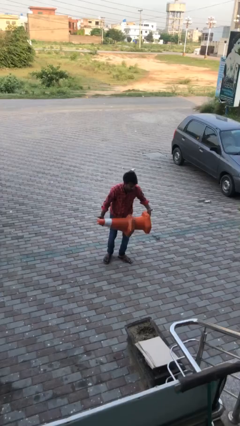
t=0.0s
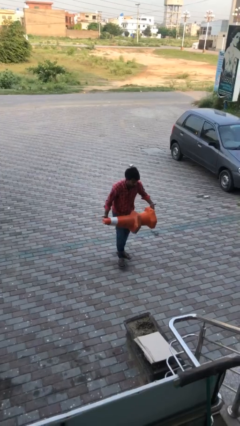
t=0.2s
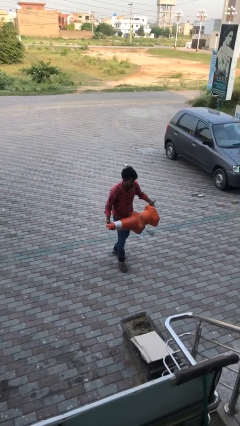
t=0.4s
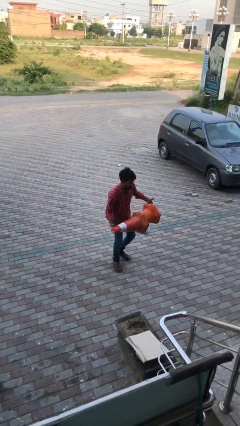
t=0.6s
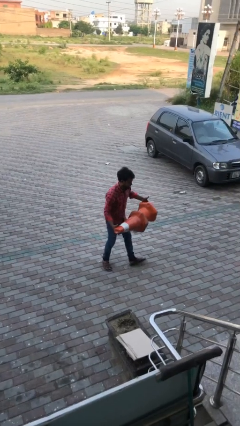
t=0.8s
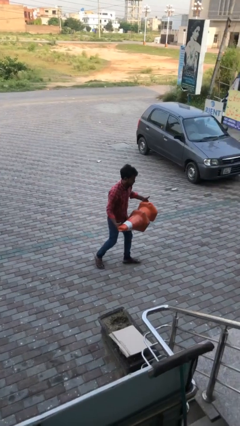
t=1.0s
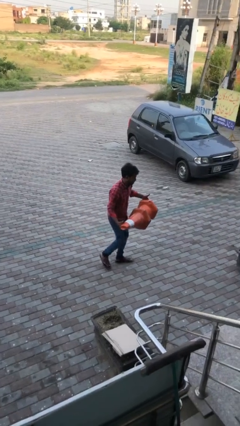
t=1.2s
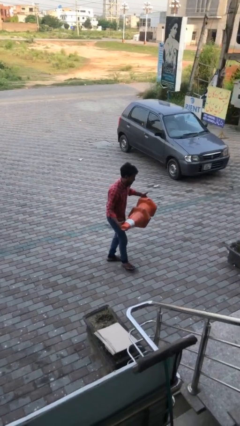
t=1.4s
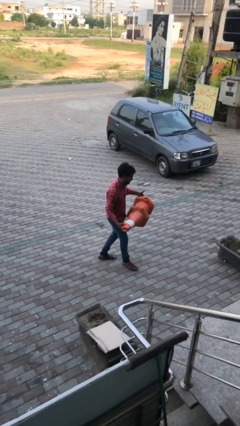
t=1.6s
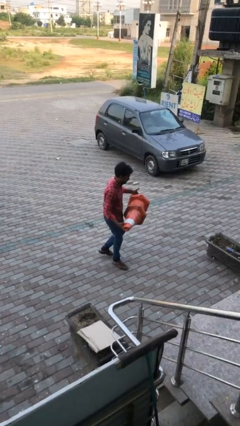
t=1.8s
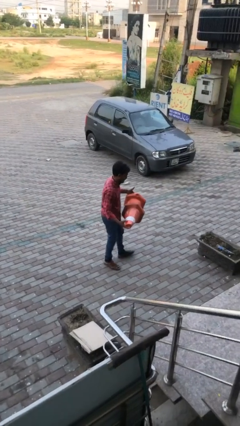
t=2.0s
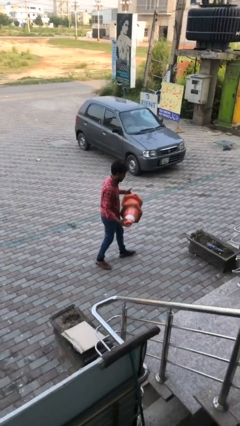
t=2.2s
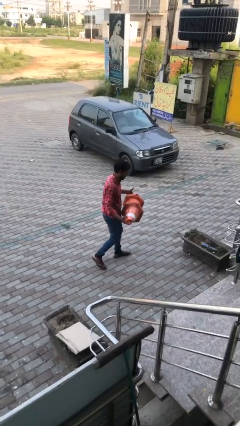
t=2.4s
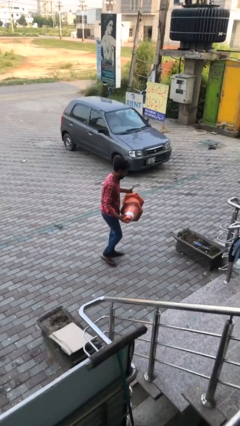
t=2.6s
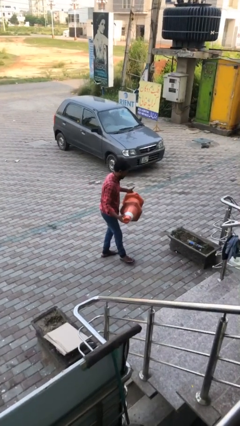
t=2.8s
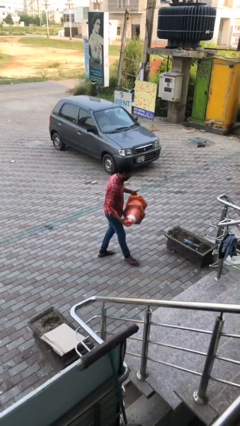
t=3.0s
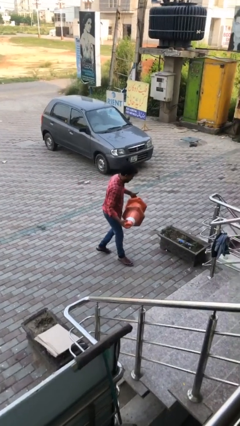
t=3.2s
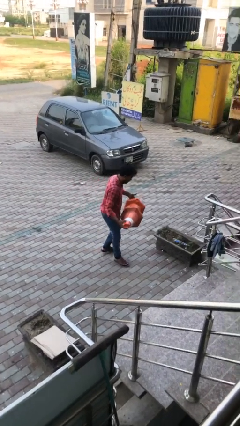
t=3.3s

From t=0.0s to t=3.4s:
person carries heavy object

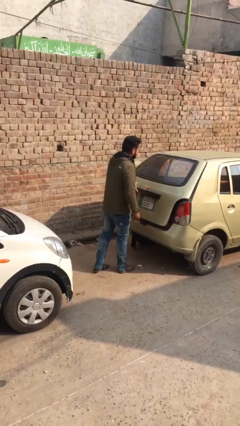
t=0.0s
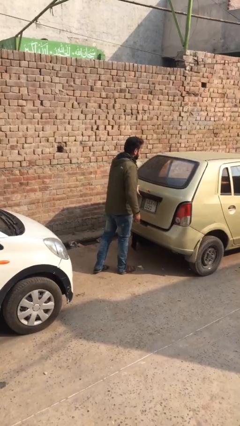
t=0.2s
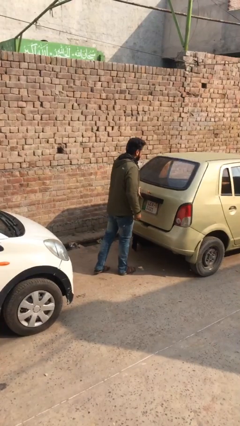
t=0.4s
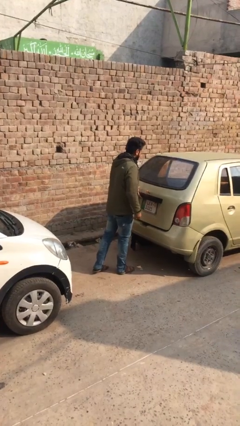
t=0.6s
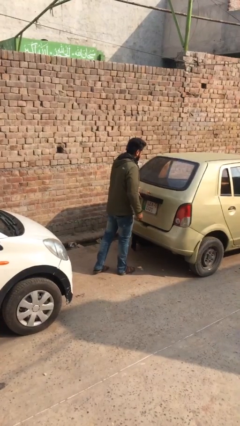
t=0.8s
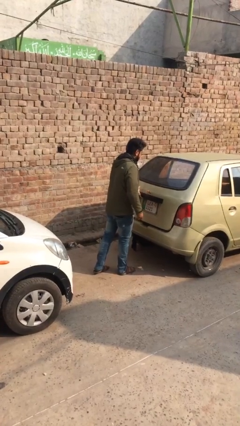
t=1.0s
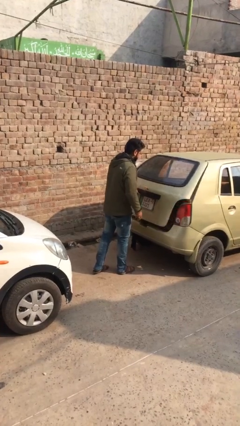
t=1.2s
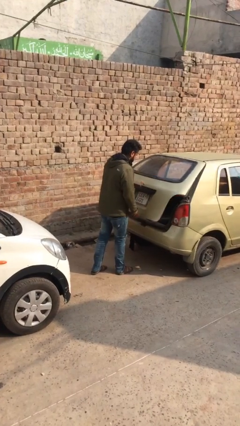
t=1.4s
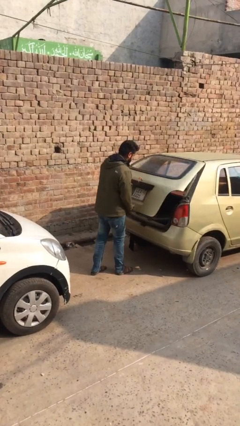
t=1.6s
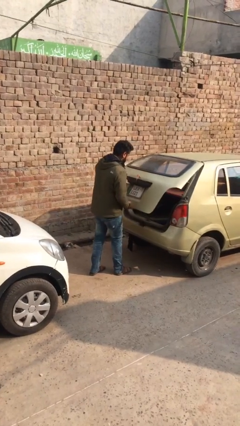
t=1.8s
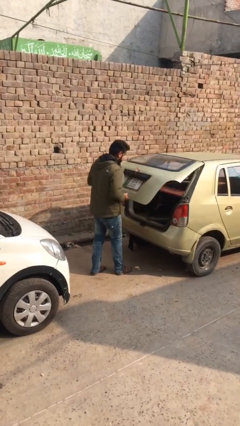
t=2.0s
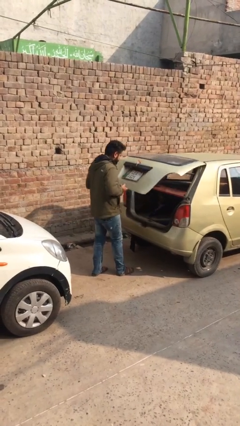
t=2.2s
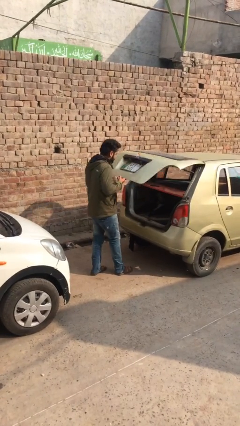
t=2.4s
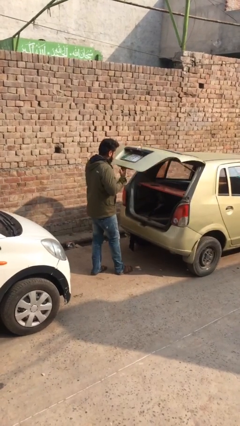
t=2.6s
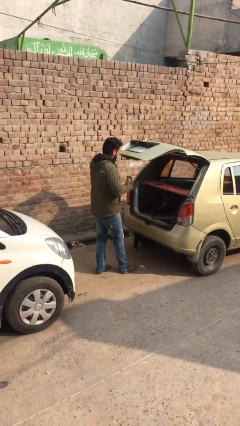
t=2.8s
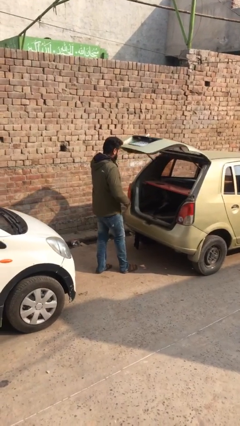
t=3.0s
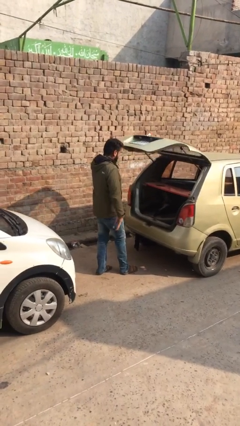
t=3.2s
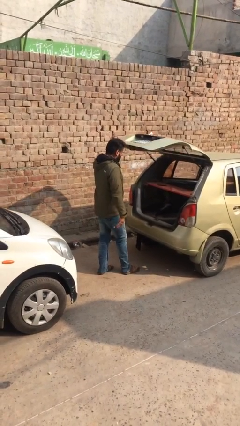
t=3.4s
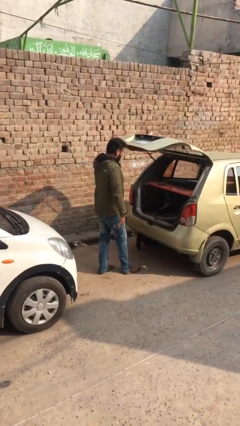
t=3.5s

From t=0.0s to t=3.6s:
person opens car trunk

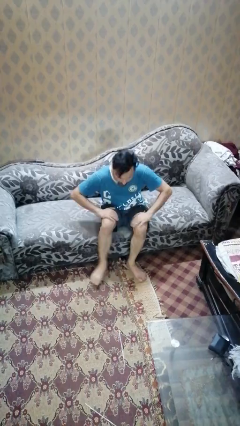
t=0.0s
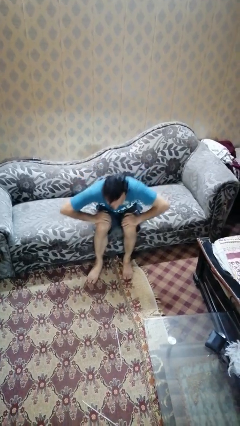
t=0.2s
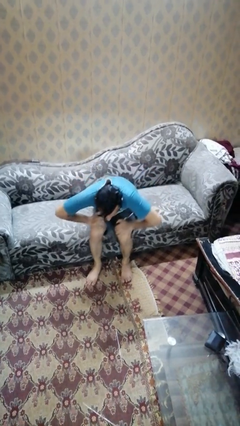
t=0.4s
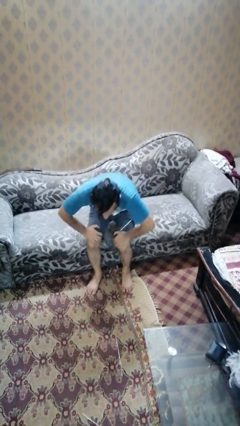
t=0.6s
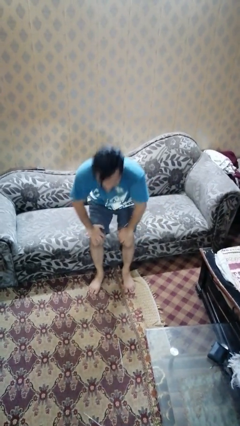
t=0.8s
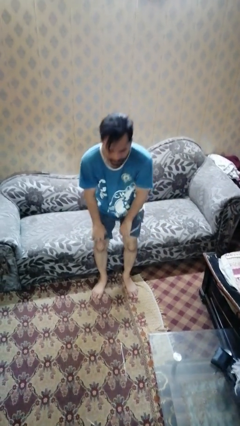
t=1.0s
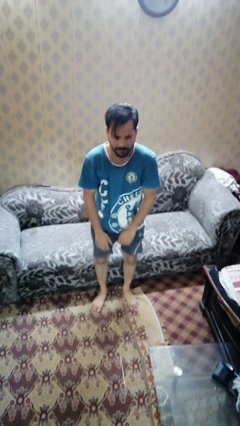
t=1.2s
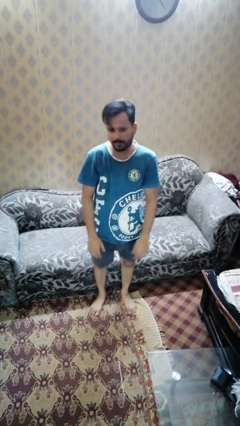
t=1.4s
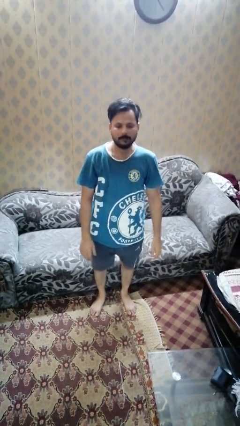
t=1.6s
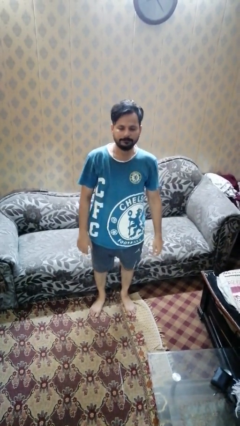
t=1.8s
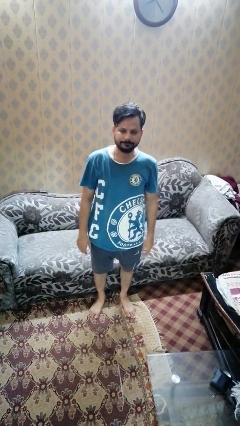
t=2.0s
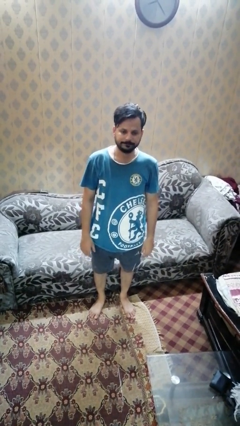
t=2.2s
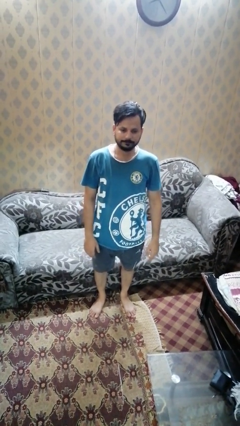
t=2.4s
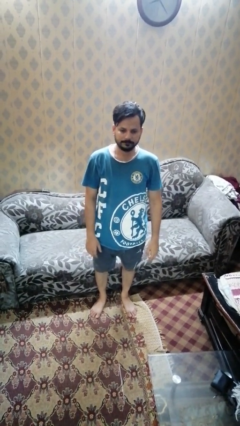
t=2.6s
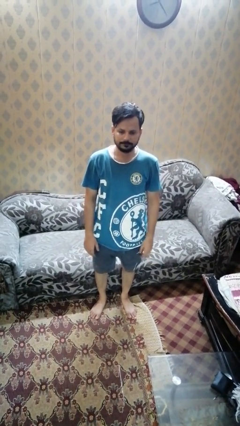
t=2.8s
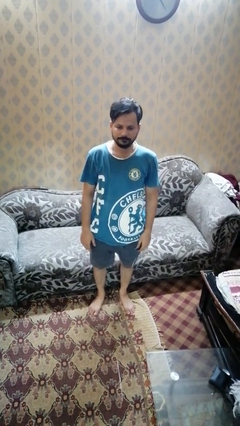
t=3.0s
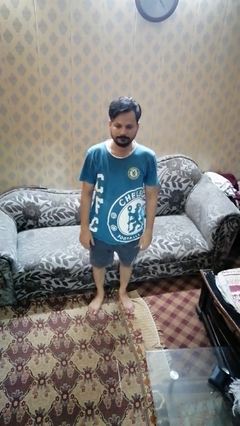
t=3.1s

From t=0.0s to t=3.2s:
person stands up

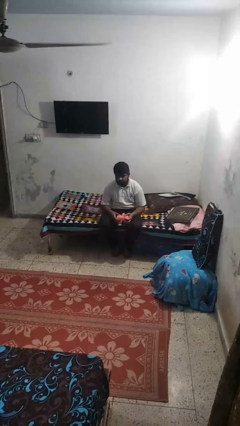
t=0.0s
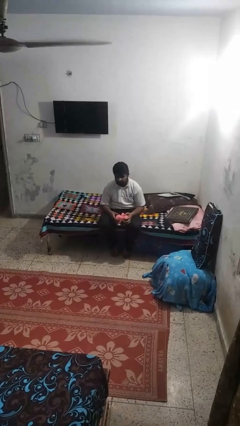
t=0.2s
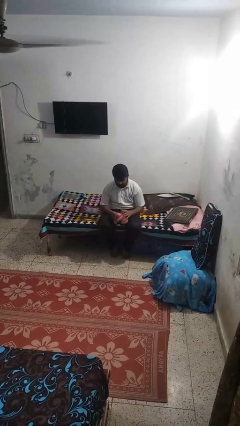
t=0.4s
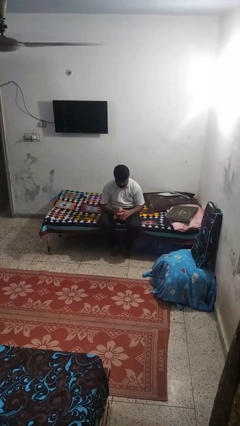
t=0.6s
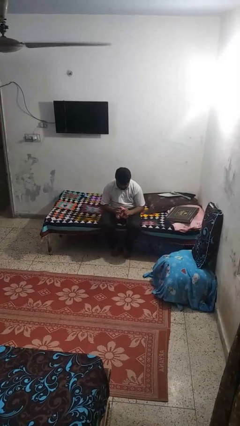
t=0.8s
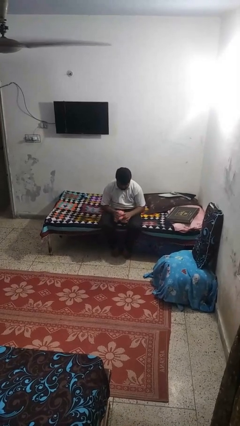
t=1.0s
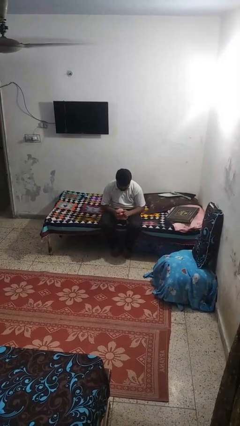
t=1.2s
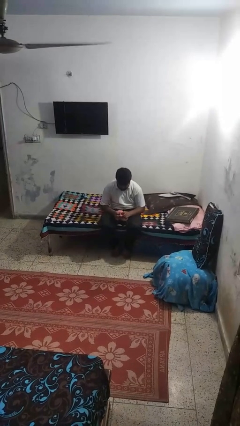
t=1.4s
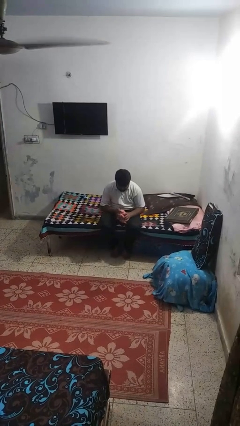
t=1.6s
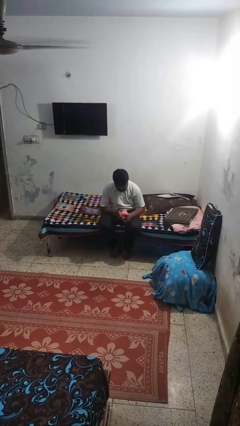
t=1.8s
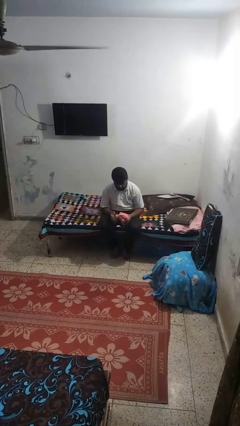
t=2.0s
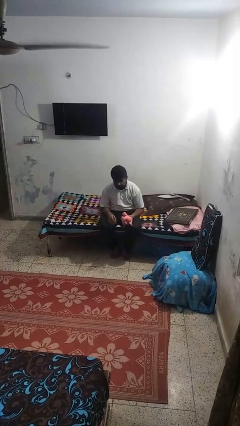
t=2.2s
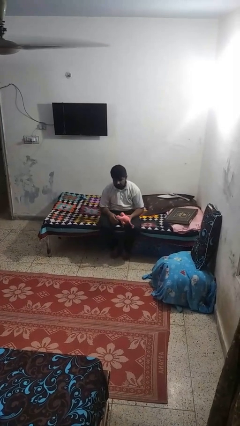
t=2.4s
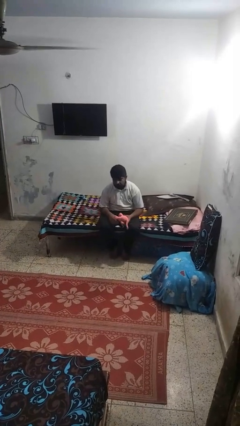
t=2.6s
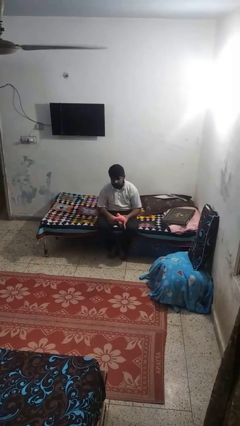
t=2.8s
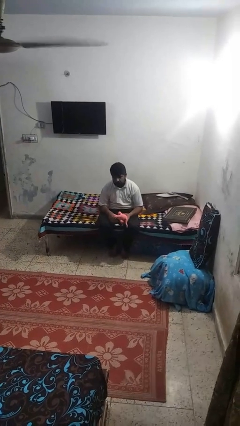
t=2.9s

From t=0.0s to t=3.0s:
person squeezes object

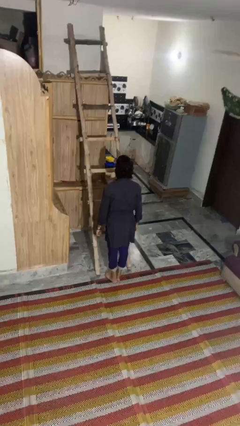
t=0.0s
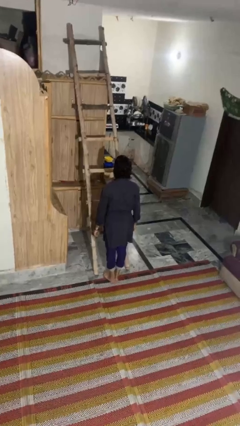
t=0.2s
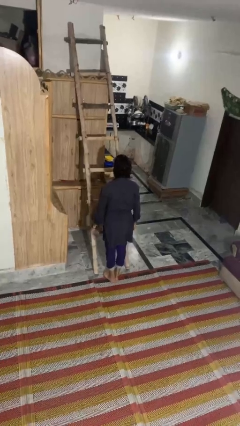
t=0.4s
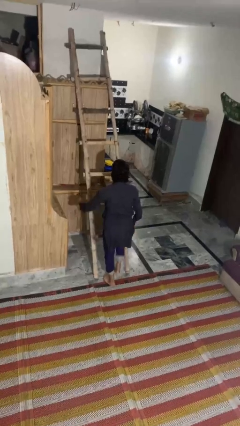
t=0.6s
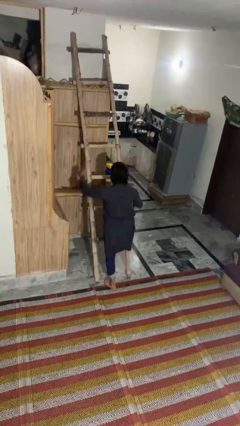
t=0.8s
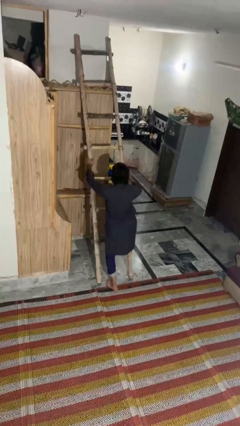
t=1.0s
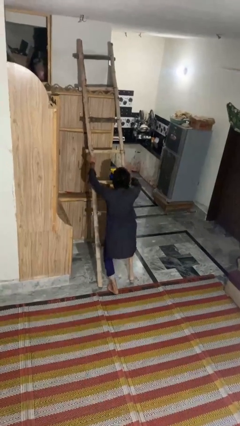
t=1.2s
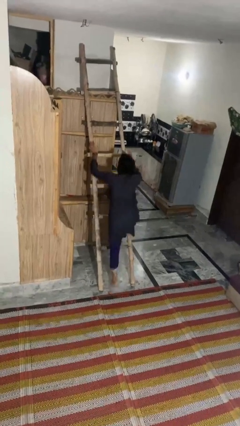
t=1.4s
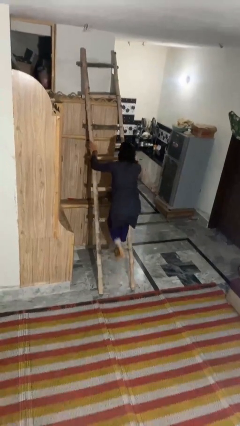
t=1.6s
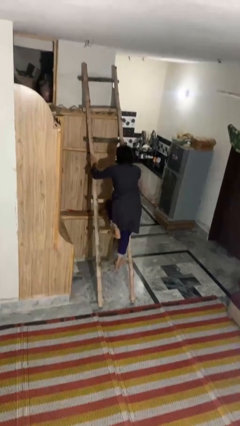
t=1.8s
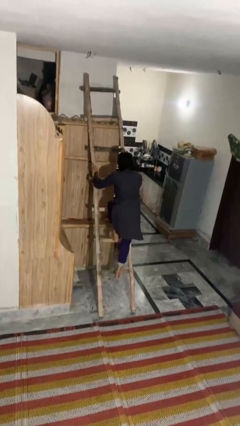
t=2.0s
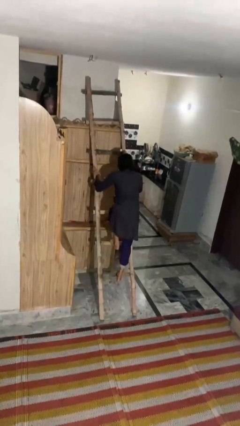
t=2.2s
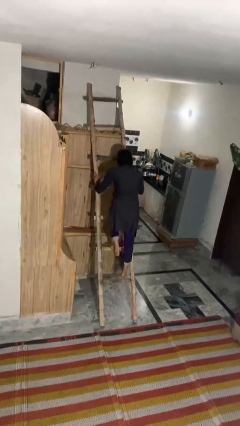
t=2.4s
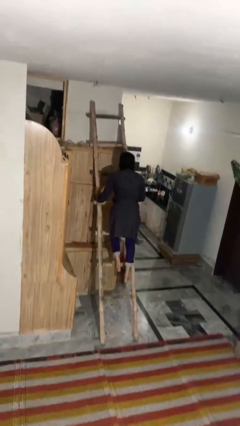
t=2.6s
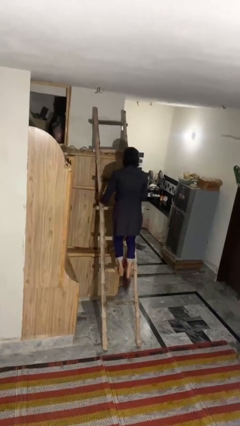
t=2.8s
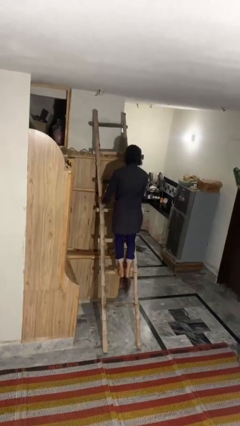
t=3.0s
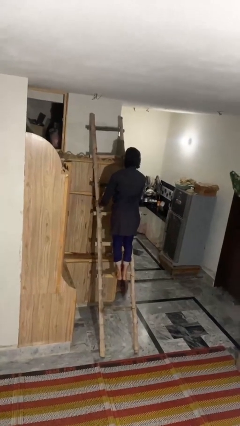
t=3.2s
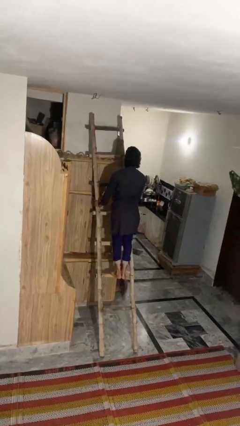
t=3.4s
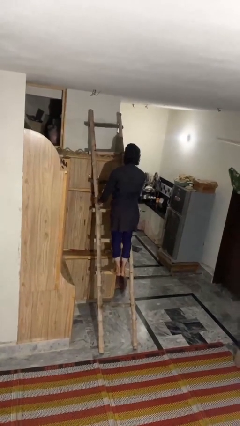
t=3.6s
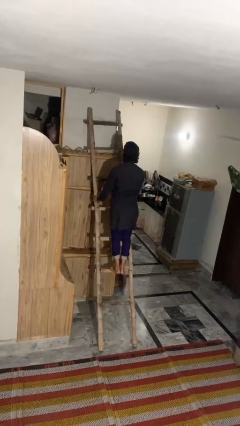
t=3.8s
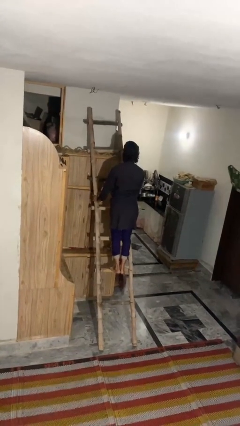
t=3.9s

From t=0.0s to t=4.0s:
person climbs up ladder

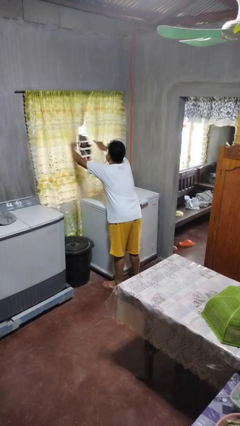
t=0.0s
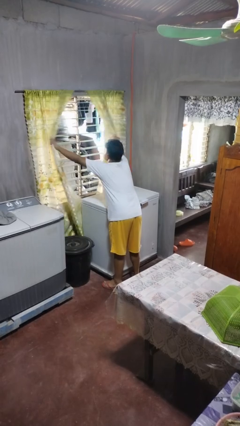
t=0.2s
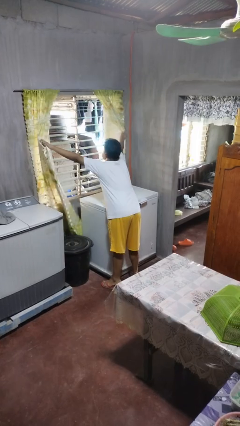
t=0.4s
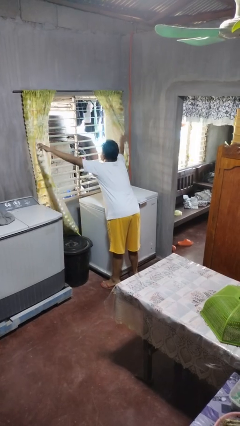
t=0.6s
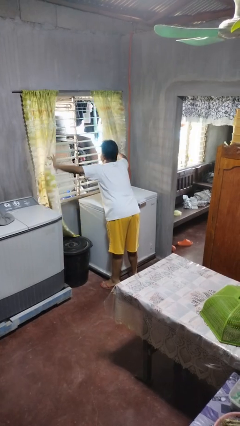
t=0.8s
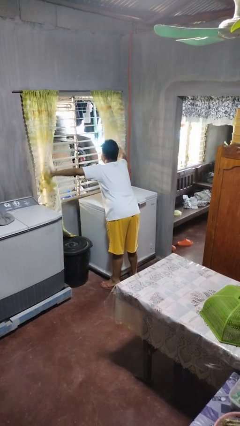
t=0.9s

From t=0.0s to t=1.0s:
person opens curtains
